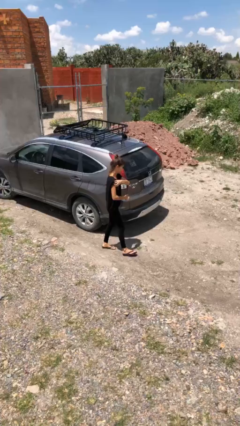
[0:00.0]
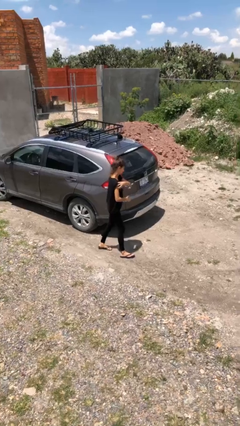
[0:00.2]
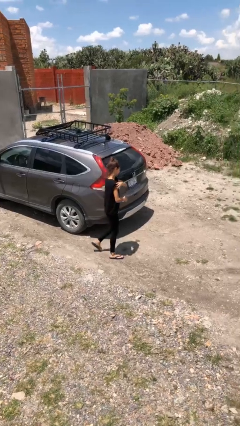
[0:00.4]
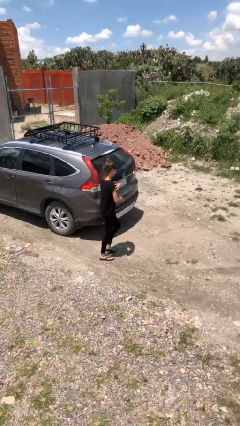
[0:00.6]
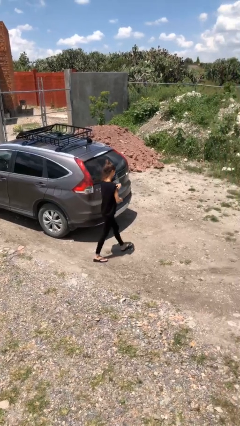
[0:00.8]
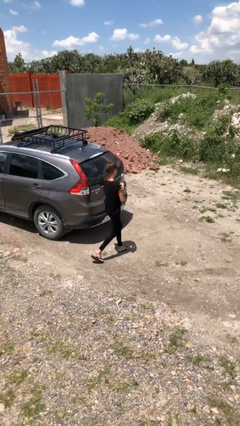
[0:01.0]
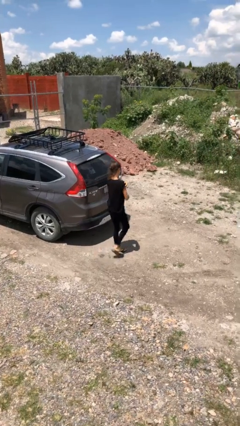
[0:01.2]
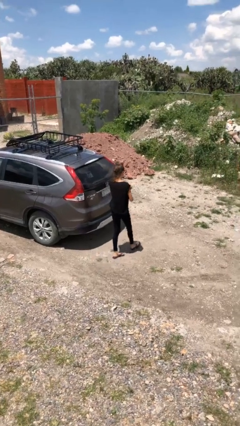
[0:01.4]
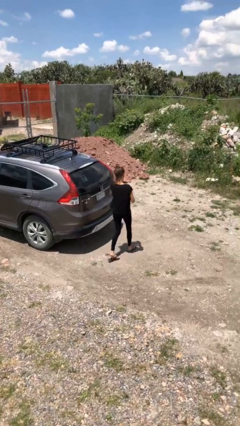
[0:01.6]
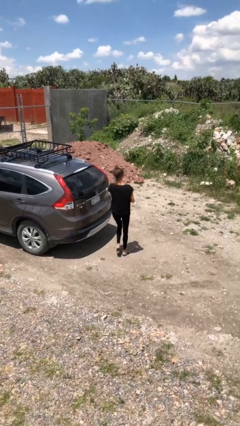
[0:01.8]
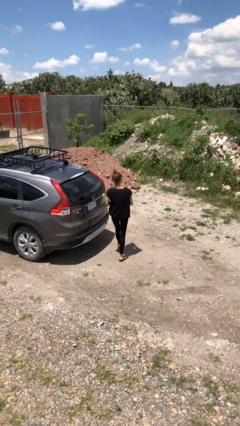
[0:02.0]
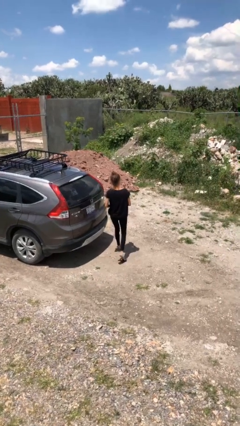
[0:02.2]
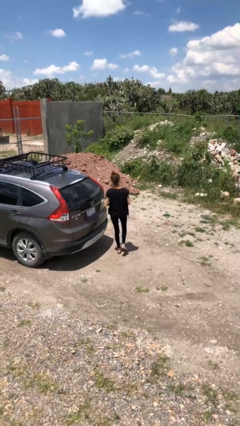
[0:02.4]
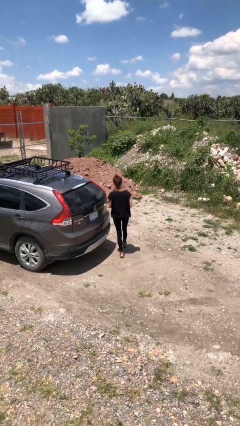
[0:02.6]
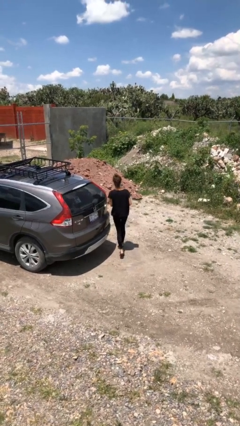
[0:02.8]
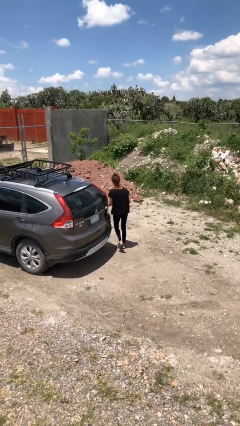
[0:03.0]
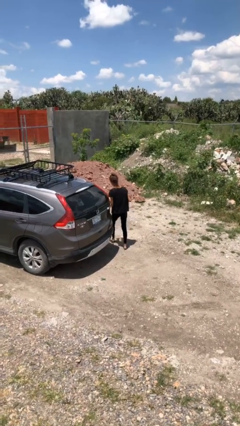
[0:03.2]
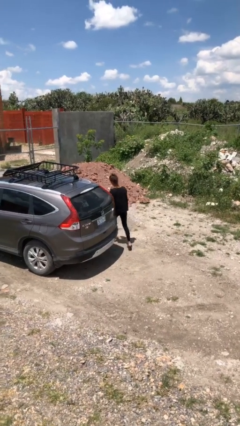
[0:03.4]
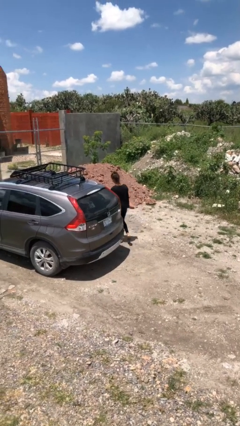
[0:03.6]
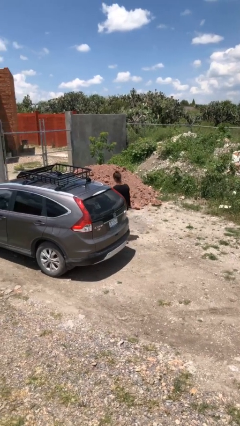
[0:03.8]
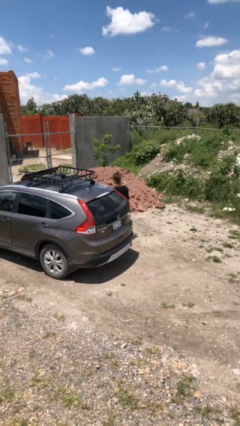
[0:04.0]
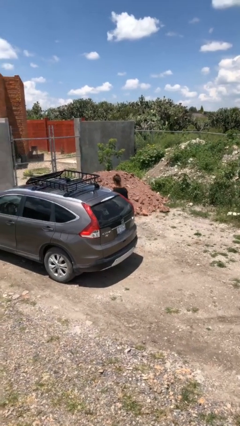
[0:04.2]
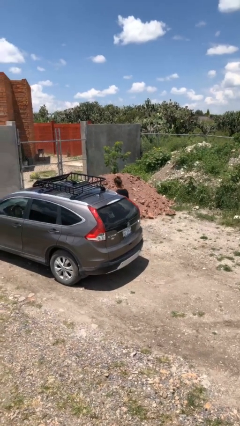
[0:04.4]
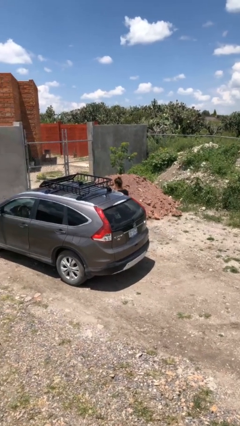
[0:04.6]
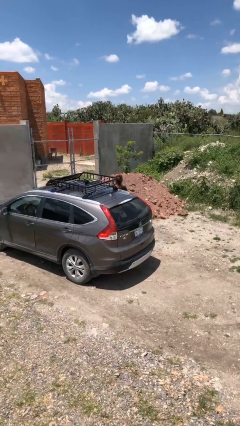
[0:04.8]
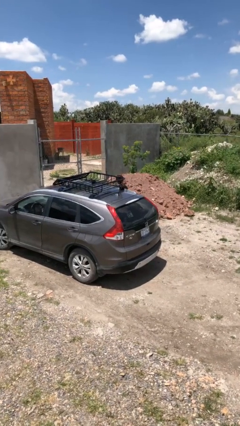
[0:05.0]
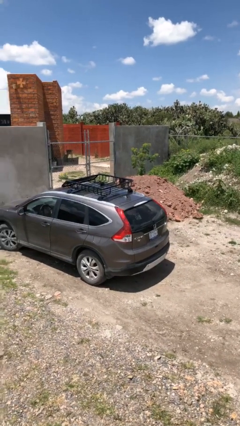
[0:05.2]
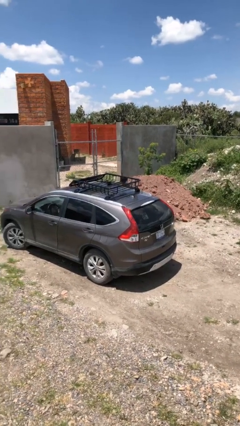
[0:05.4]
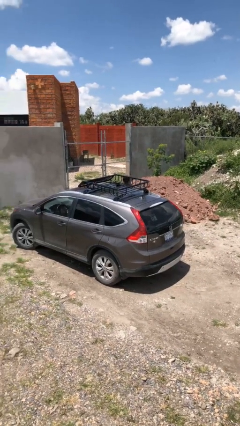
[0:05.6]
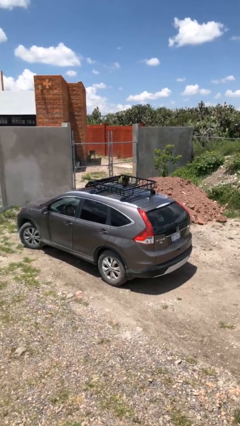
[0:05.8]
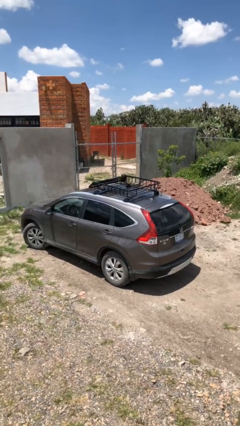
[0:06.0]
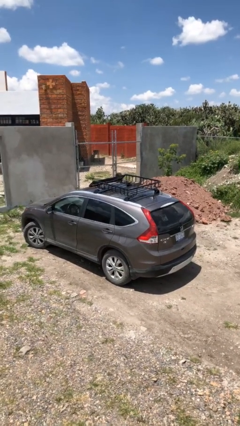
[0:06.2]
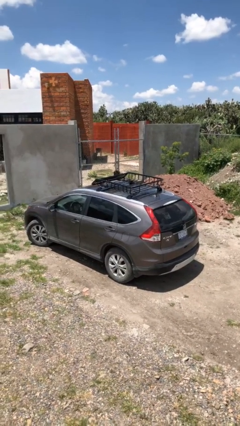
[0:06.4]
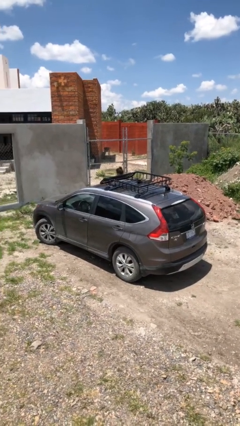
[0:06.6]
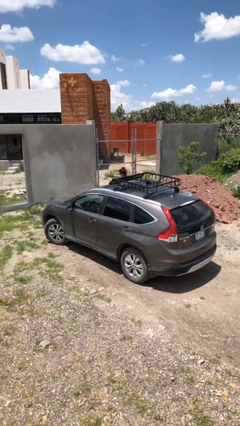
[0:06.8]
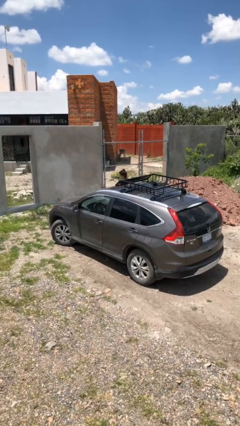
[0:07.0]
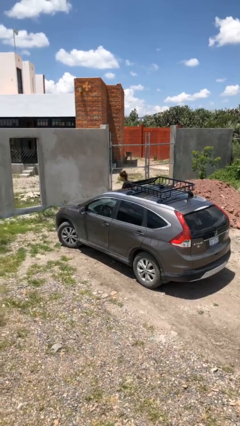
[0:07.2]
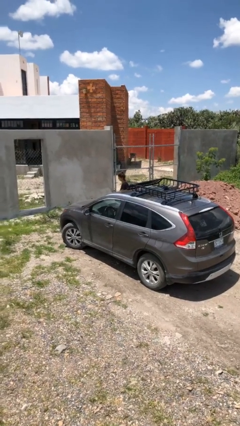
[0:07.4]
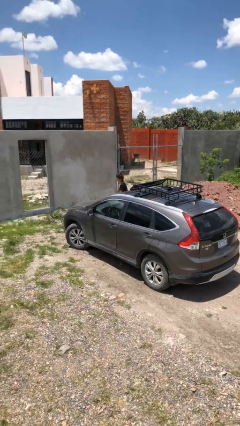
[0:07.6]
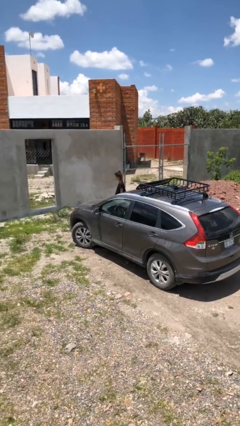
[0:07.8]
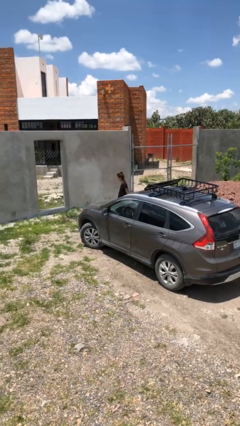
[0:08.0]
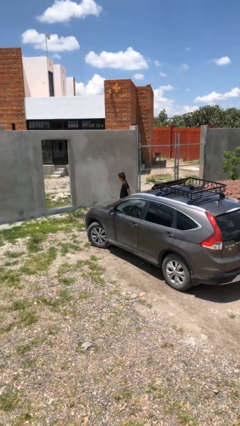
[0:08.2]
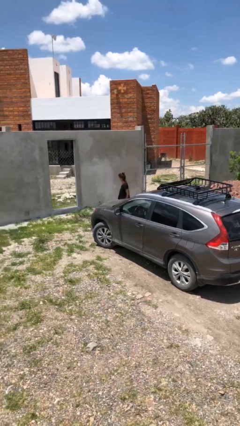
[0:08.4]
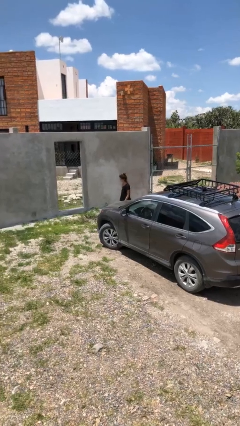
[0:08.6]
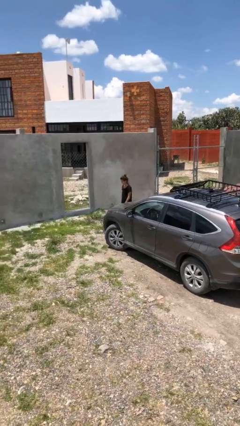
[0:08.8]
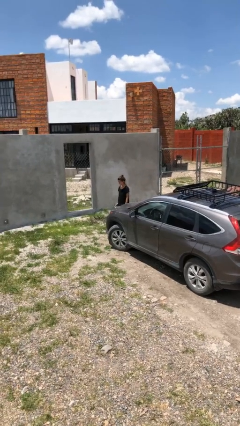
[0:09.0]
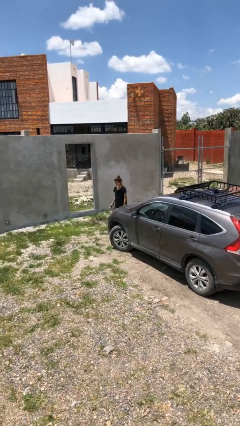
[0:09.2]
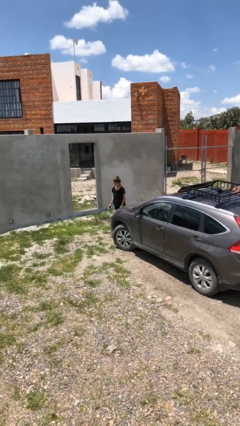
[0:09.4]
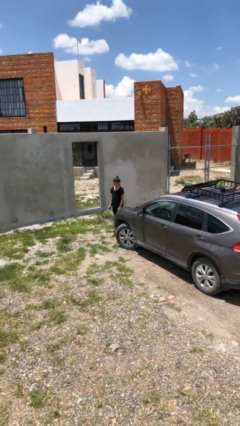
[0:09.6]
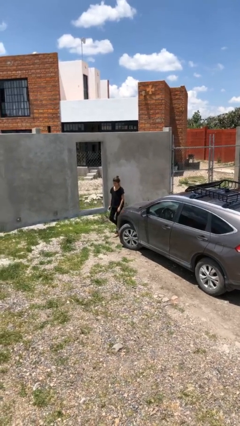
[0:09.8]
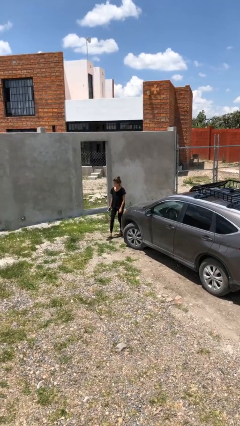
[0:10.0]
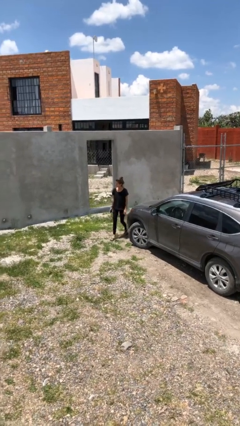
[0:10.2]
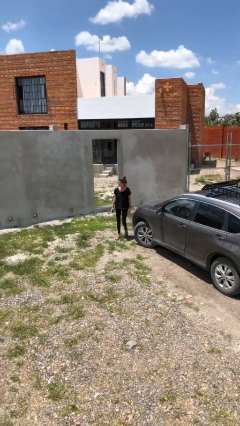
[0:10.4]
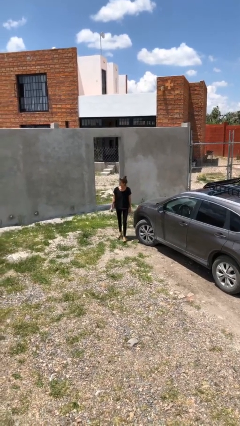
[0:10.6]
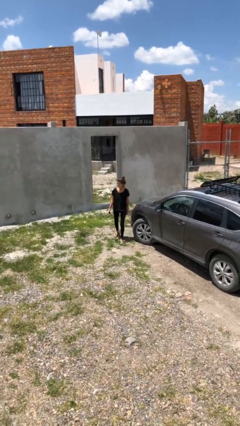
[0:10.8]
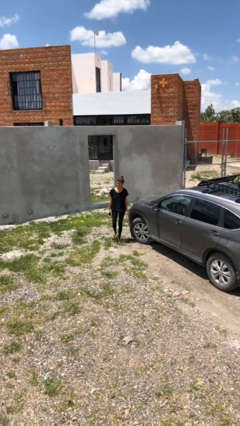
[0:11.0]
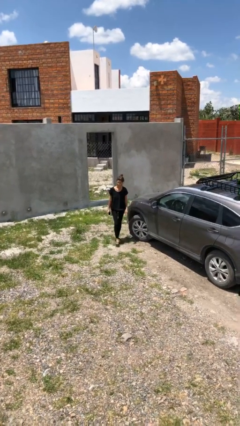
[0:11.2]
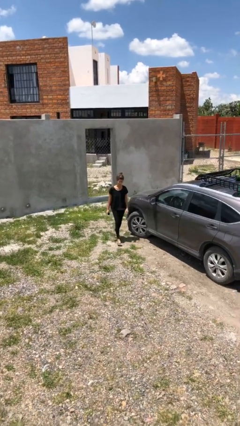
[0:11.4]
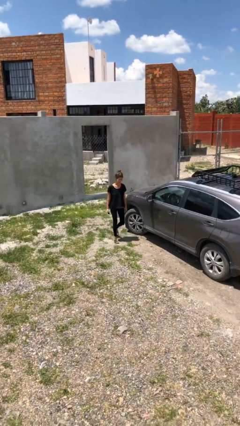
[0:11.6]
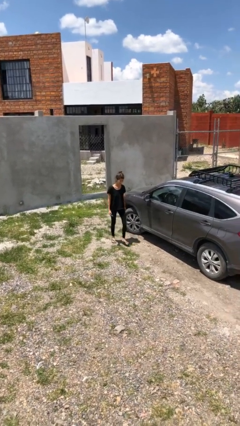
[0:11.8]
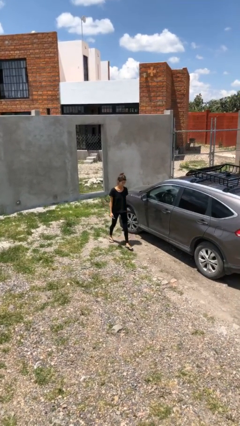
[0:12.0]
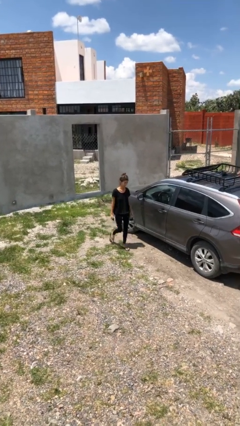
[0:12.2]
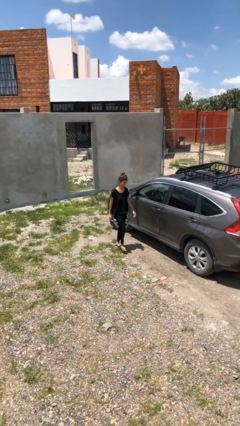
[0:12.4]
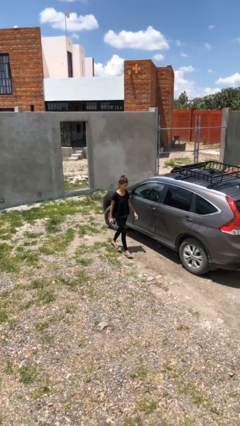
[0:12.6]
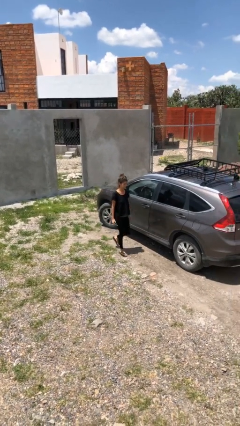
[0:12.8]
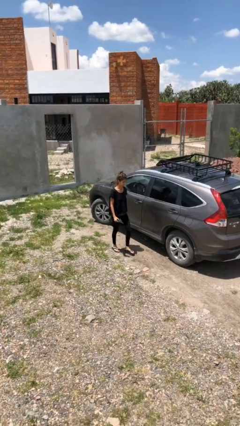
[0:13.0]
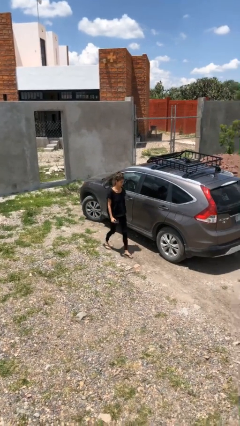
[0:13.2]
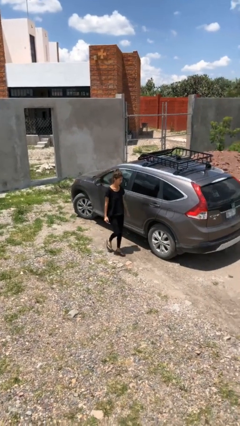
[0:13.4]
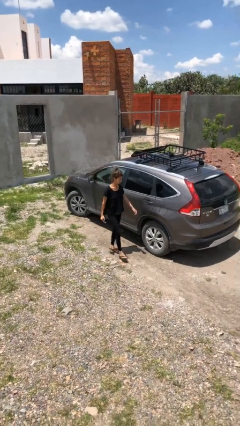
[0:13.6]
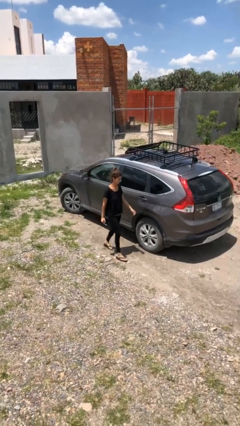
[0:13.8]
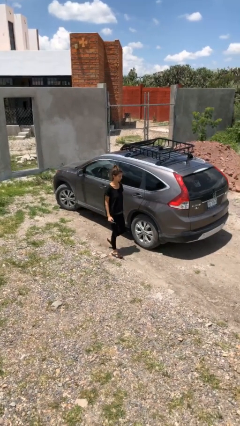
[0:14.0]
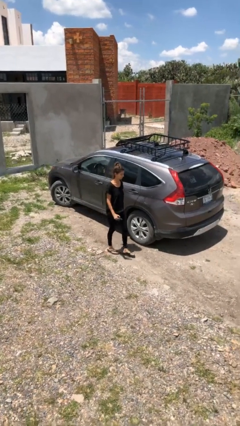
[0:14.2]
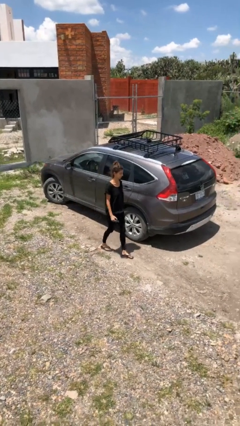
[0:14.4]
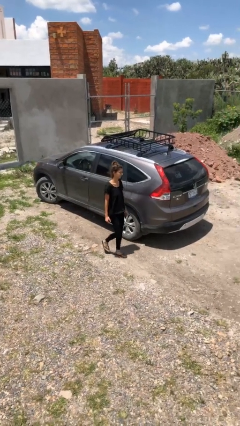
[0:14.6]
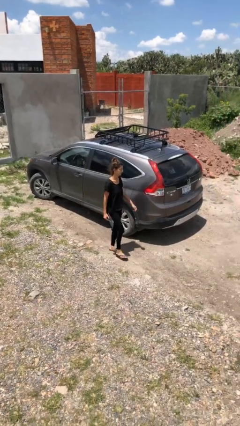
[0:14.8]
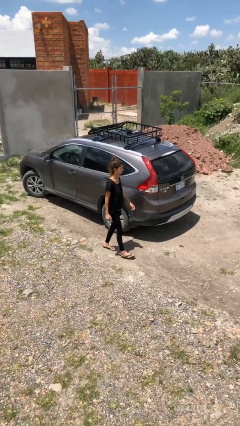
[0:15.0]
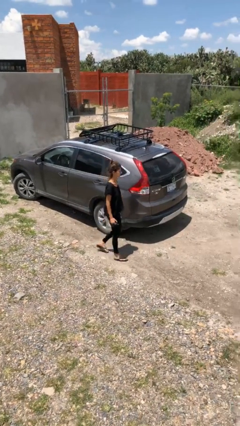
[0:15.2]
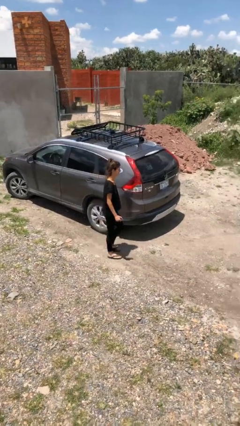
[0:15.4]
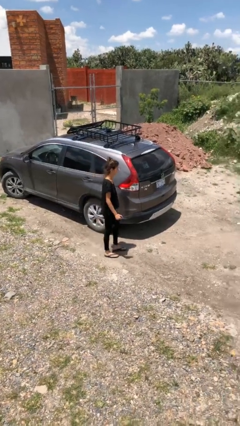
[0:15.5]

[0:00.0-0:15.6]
person walks around car

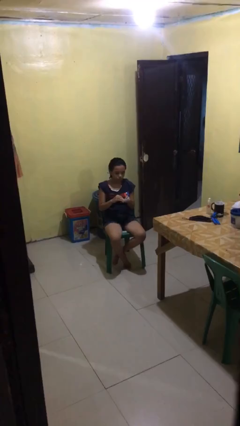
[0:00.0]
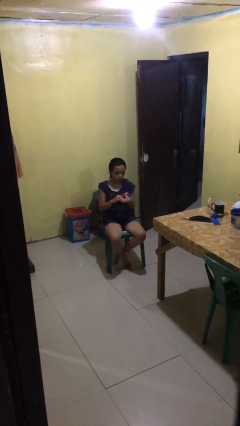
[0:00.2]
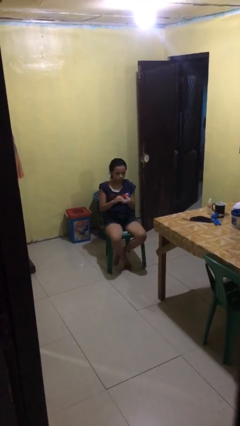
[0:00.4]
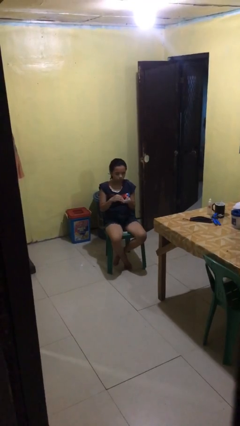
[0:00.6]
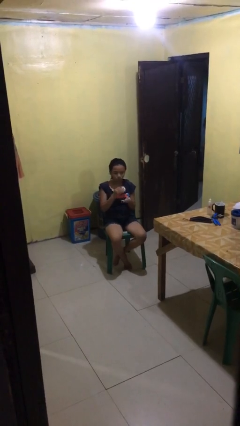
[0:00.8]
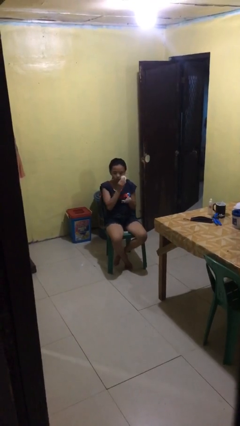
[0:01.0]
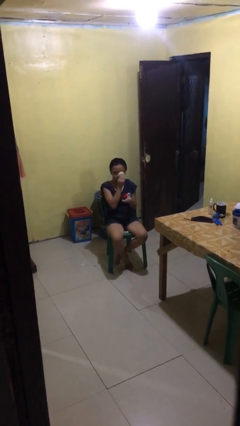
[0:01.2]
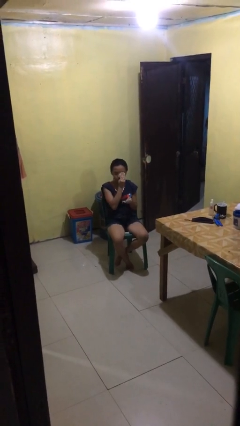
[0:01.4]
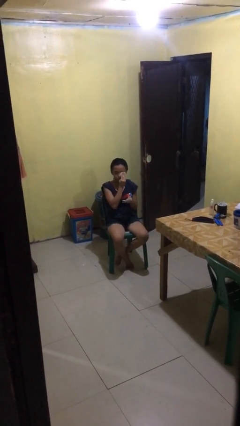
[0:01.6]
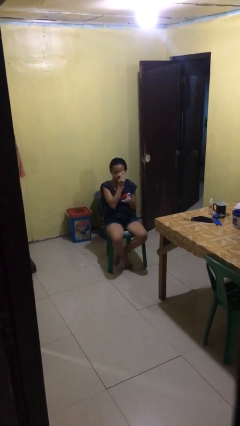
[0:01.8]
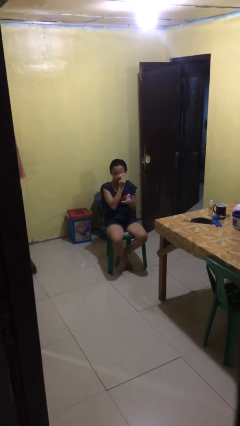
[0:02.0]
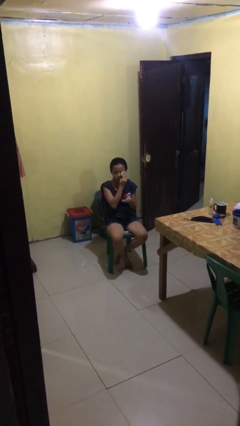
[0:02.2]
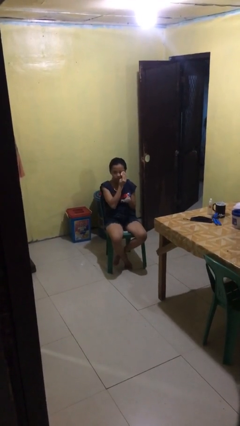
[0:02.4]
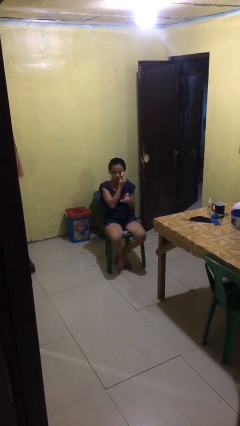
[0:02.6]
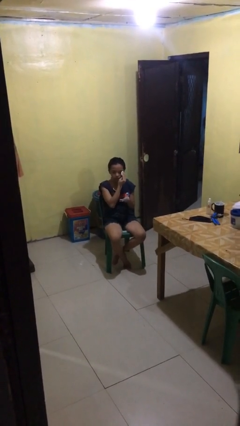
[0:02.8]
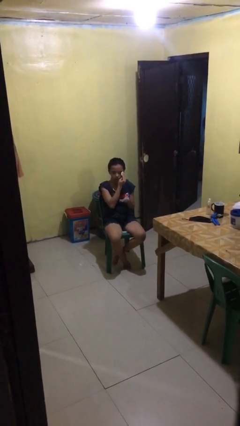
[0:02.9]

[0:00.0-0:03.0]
person applies foundation makeup
